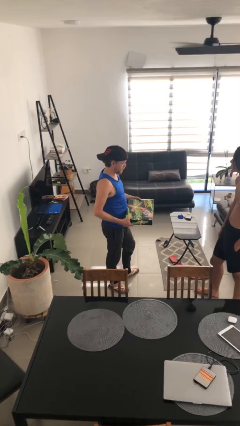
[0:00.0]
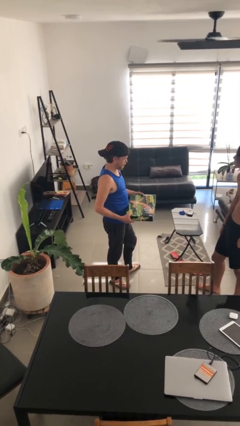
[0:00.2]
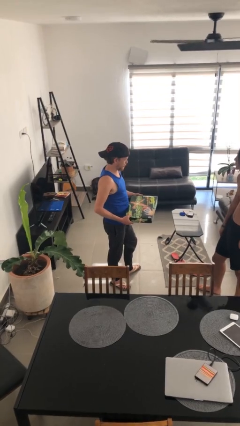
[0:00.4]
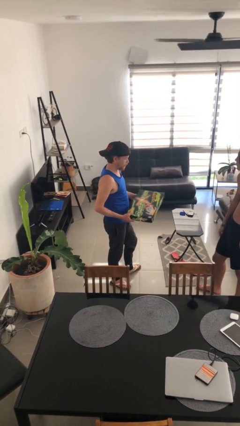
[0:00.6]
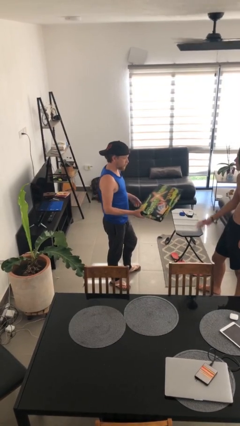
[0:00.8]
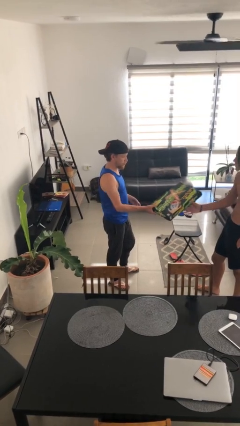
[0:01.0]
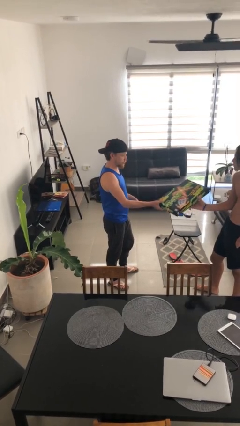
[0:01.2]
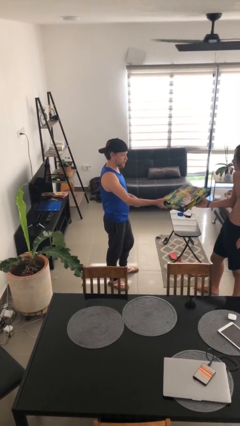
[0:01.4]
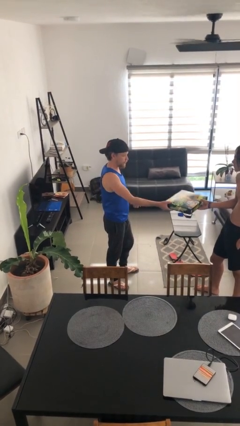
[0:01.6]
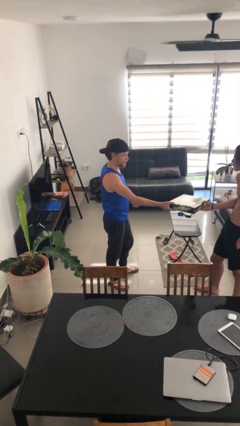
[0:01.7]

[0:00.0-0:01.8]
person transfers object to person

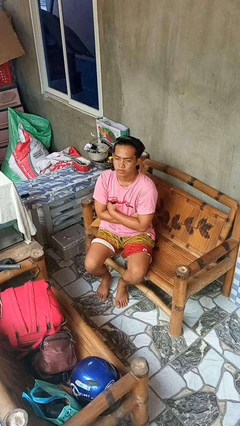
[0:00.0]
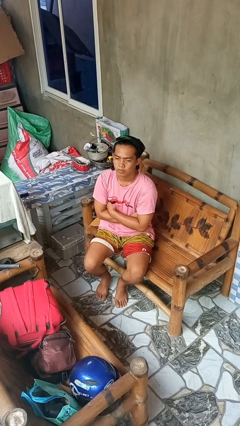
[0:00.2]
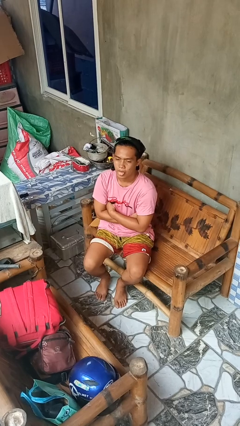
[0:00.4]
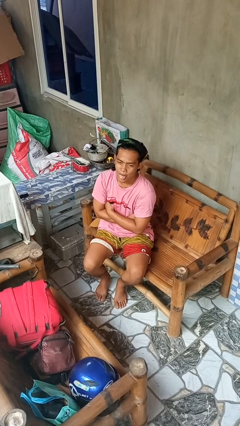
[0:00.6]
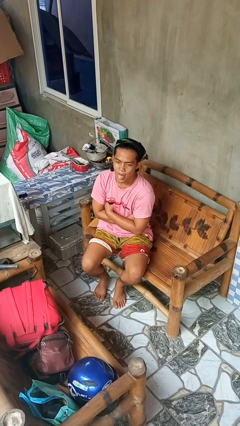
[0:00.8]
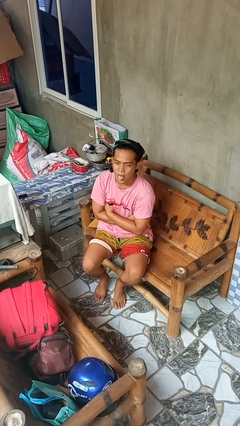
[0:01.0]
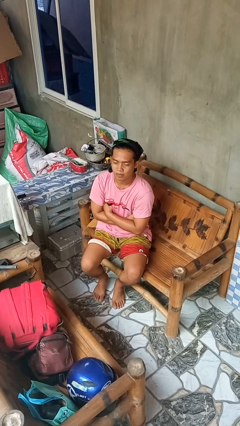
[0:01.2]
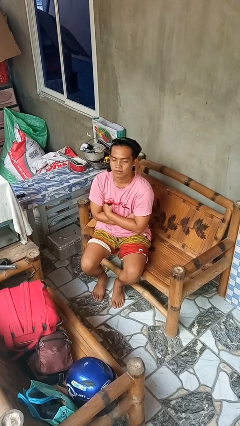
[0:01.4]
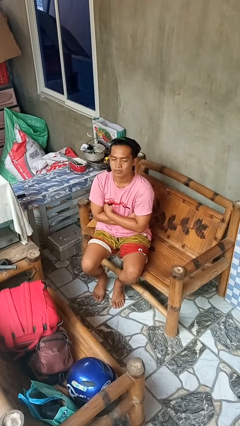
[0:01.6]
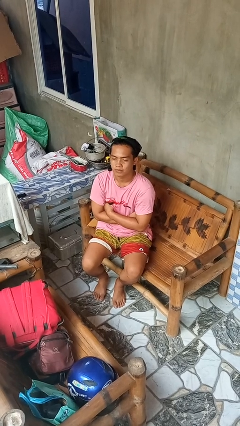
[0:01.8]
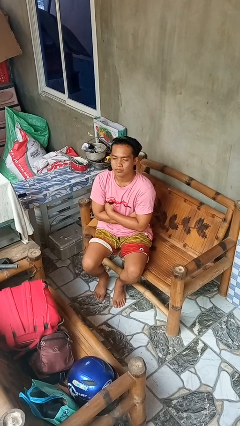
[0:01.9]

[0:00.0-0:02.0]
person sticks out tongue

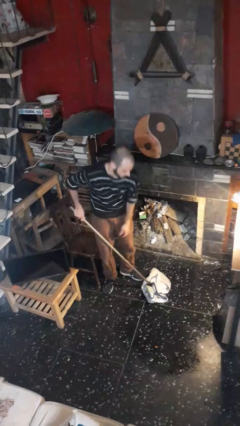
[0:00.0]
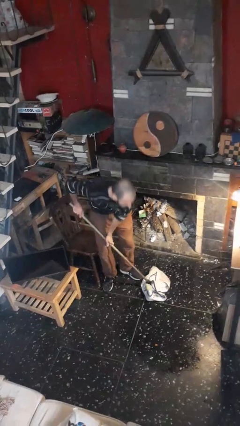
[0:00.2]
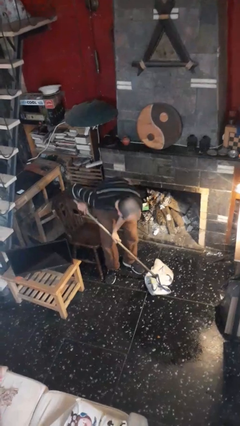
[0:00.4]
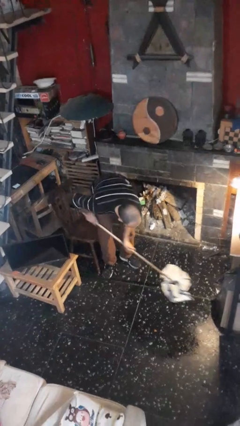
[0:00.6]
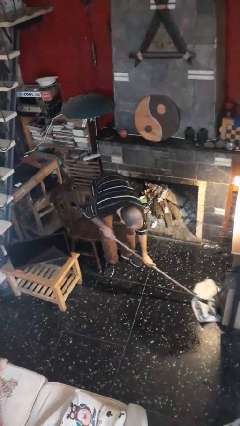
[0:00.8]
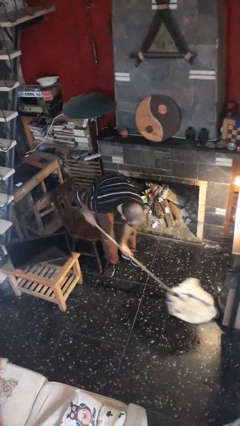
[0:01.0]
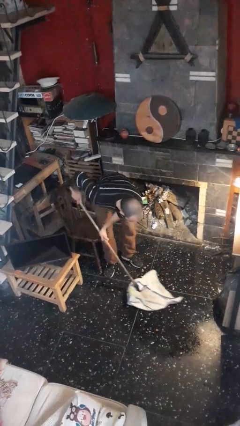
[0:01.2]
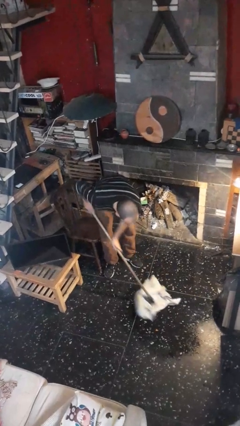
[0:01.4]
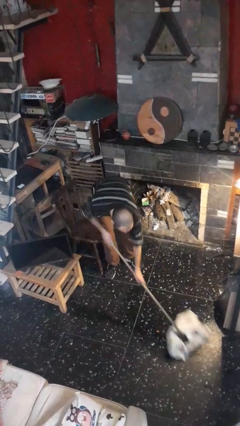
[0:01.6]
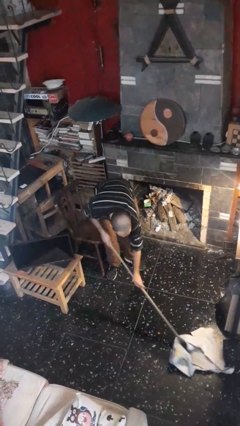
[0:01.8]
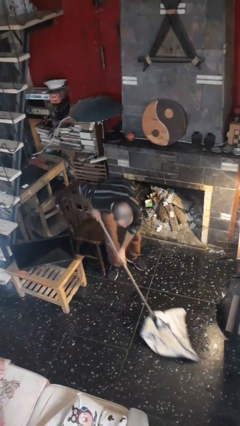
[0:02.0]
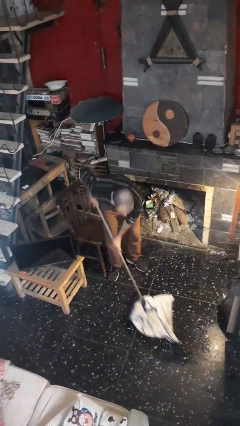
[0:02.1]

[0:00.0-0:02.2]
person mops

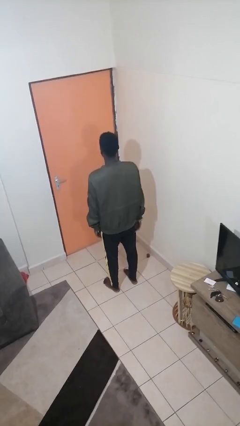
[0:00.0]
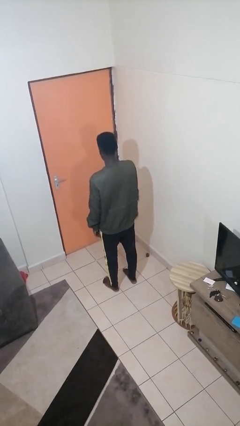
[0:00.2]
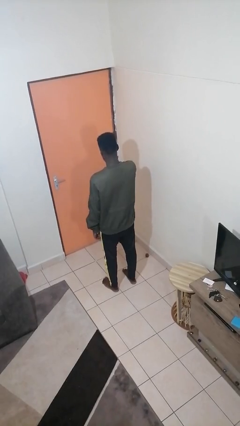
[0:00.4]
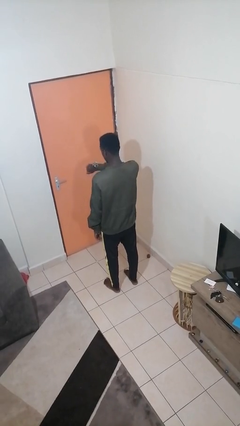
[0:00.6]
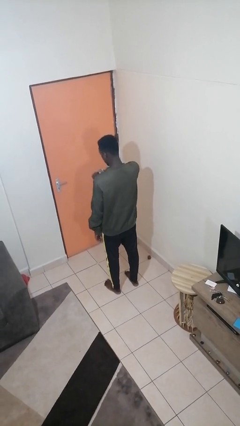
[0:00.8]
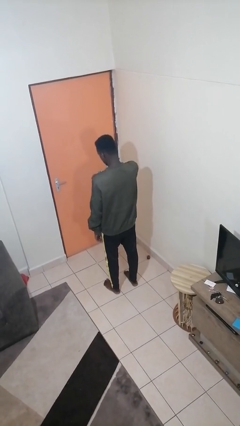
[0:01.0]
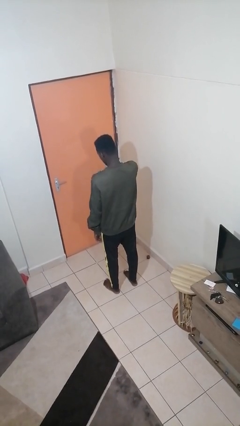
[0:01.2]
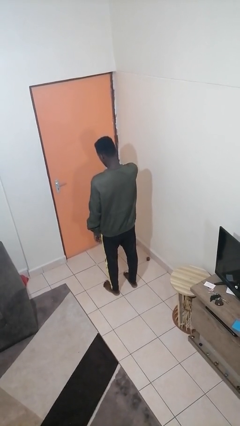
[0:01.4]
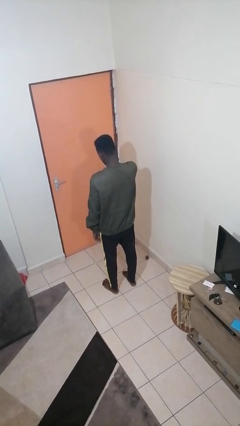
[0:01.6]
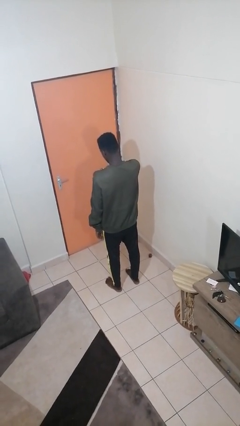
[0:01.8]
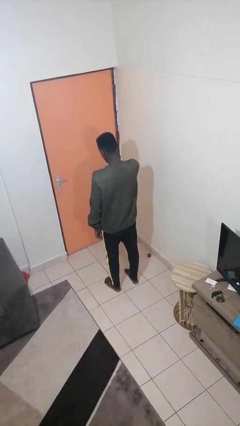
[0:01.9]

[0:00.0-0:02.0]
person looks at wristwatch

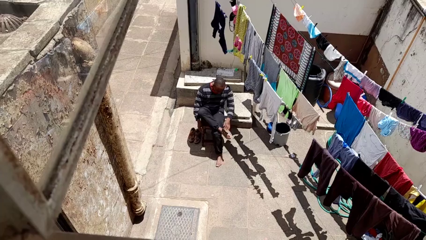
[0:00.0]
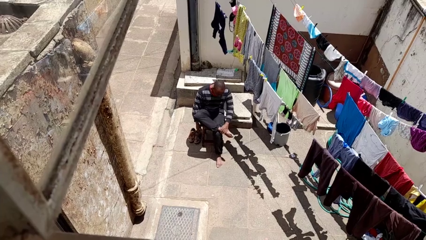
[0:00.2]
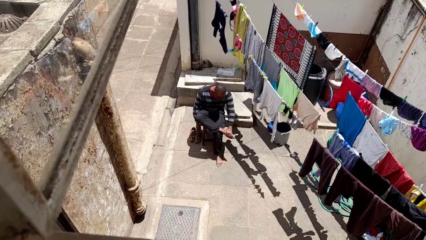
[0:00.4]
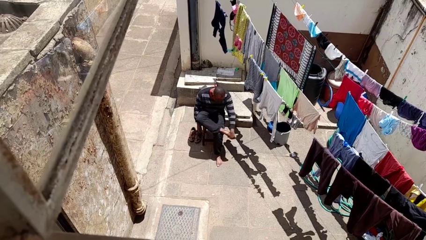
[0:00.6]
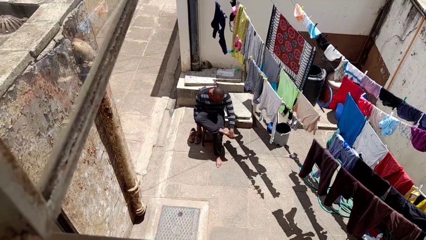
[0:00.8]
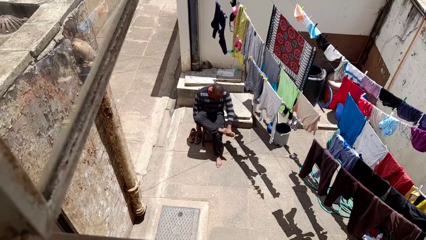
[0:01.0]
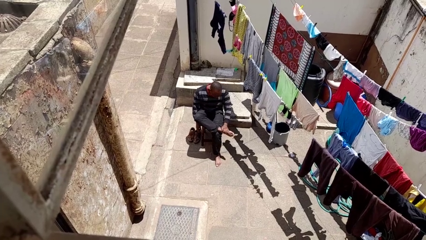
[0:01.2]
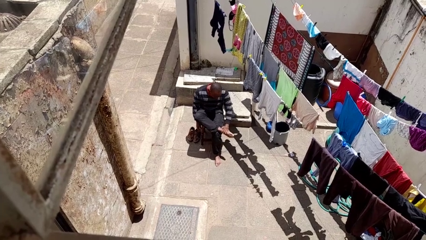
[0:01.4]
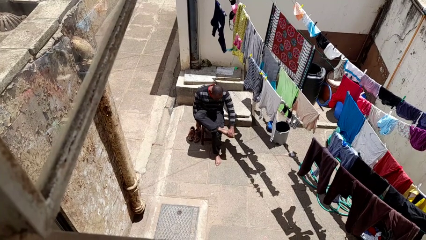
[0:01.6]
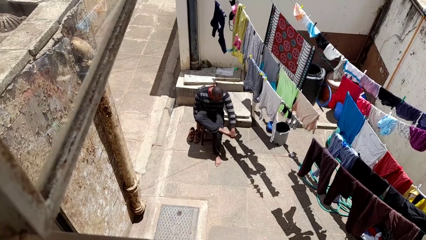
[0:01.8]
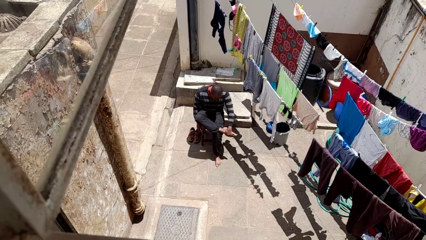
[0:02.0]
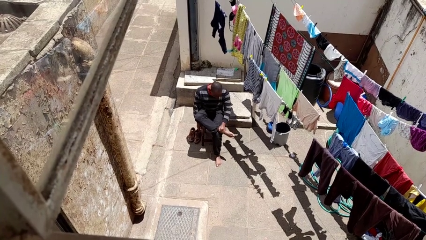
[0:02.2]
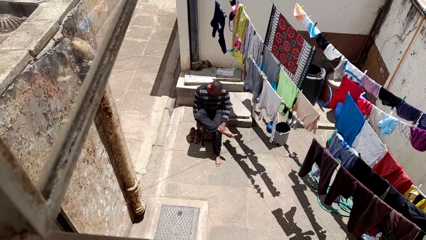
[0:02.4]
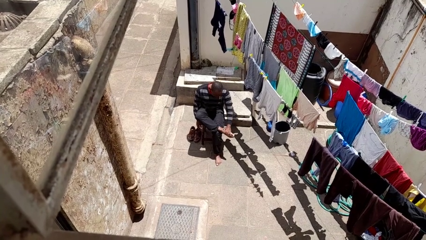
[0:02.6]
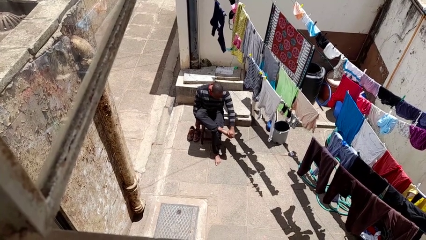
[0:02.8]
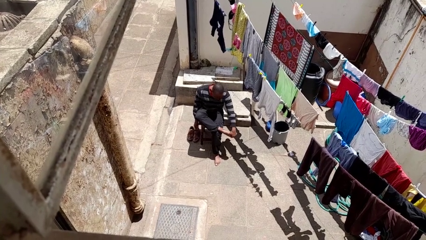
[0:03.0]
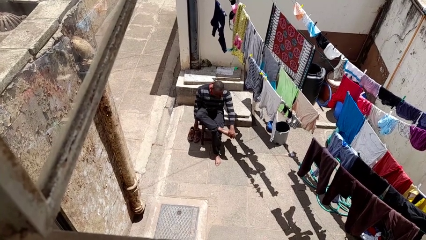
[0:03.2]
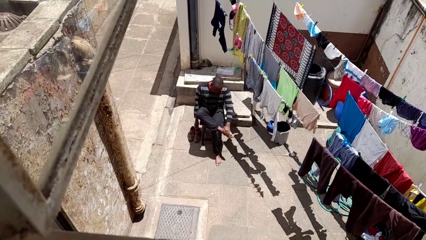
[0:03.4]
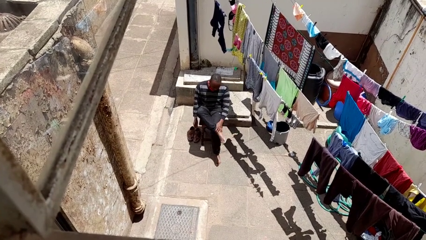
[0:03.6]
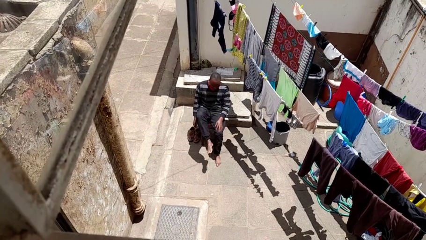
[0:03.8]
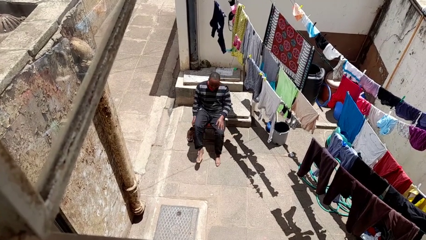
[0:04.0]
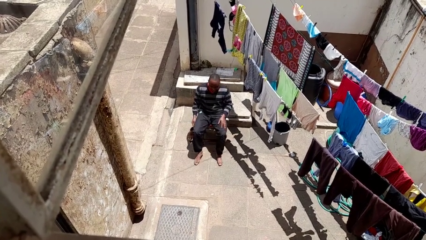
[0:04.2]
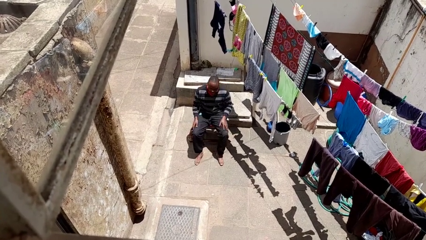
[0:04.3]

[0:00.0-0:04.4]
person rubs foot

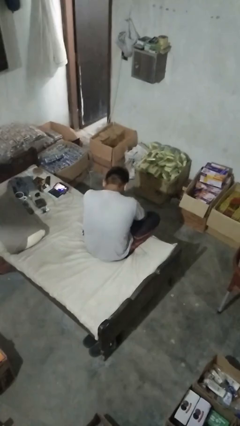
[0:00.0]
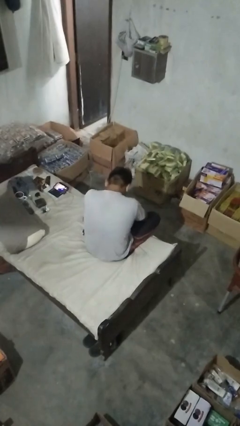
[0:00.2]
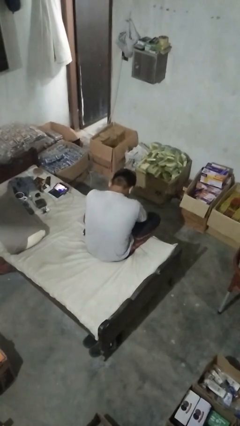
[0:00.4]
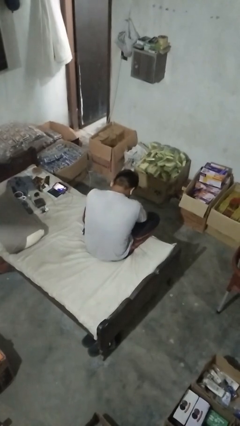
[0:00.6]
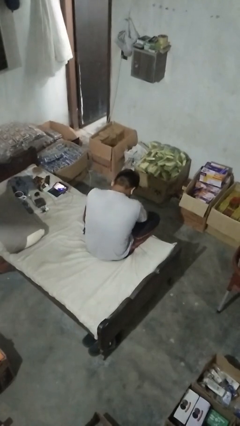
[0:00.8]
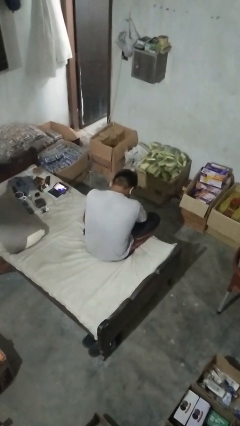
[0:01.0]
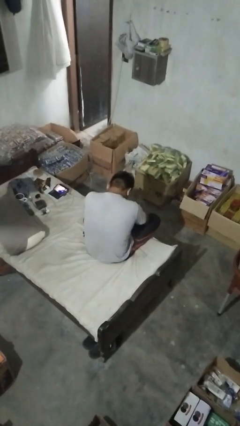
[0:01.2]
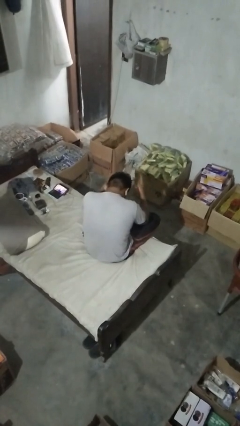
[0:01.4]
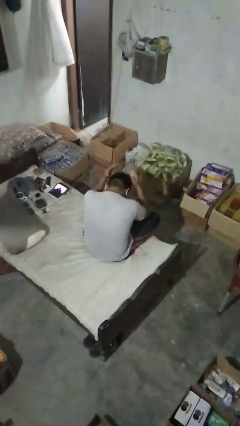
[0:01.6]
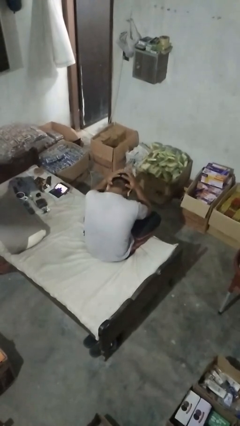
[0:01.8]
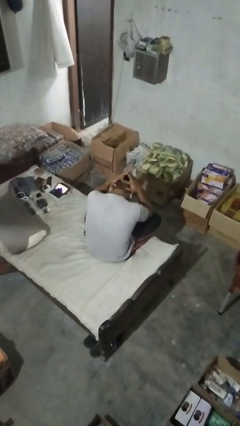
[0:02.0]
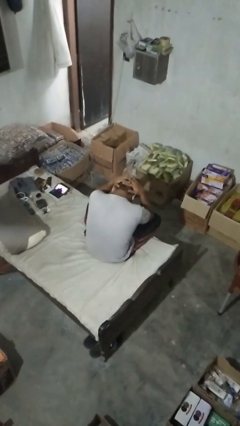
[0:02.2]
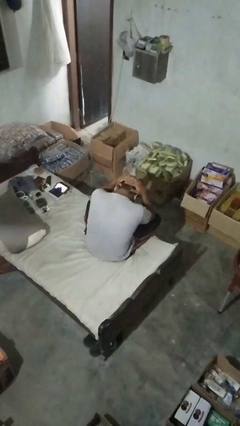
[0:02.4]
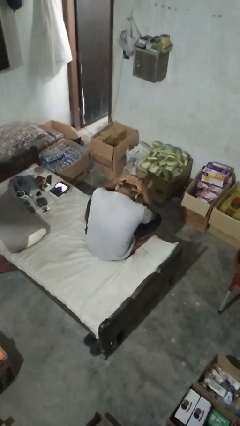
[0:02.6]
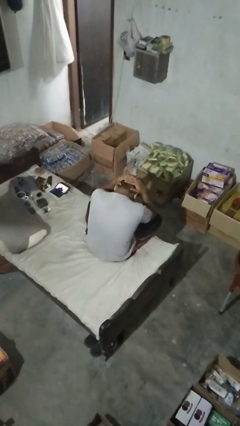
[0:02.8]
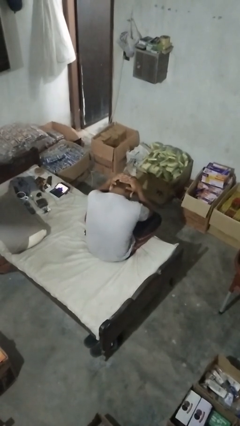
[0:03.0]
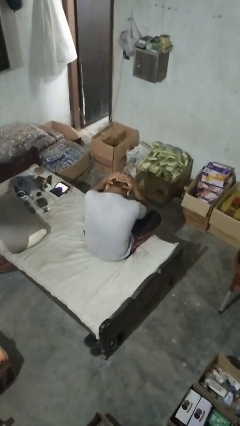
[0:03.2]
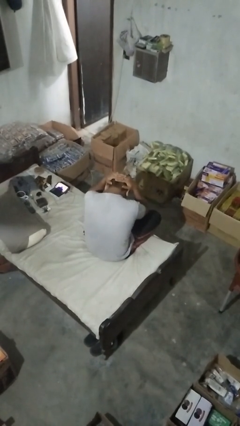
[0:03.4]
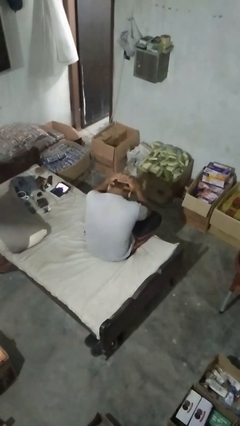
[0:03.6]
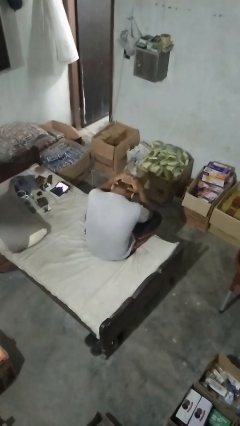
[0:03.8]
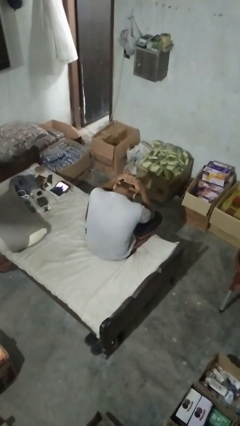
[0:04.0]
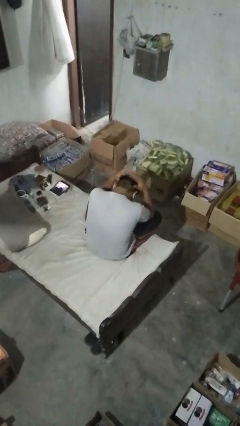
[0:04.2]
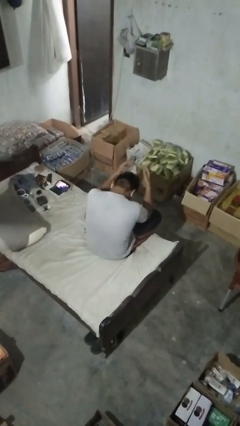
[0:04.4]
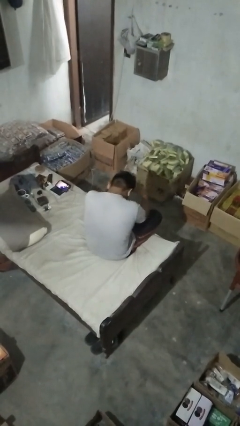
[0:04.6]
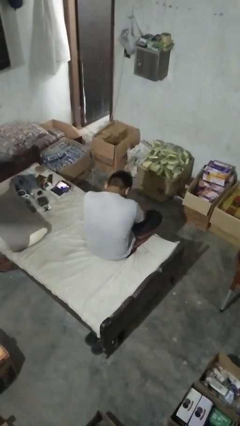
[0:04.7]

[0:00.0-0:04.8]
person pats head
